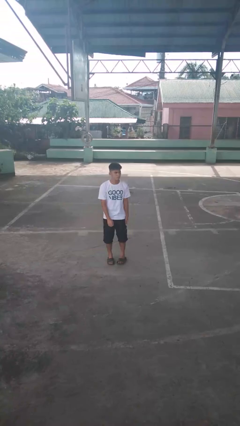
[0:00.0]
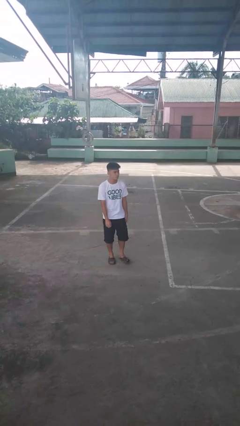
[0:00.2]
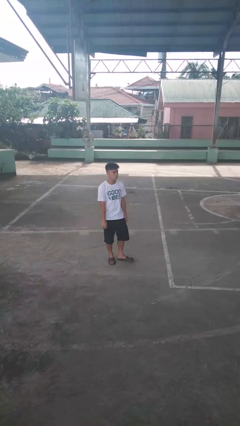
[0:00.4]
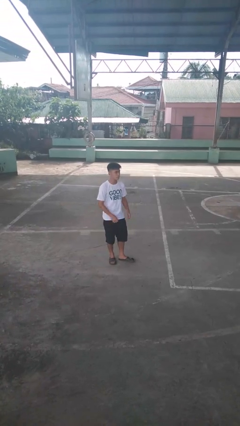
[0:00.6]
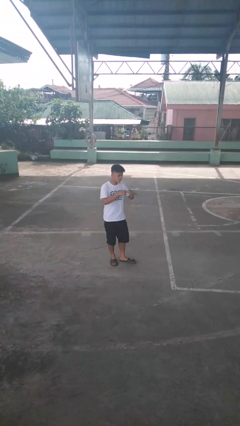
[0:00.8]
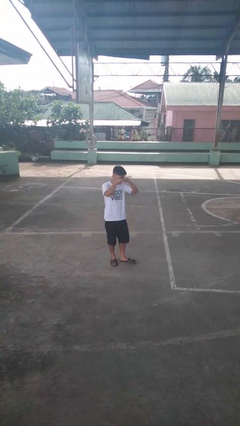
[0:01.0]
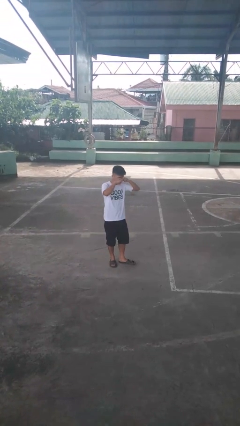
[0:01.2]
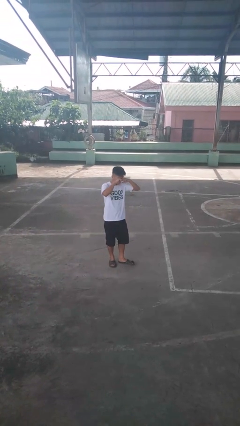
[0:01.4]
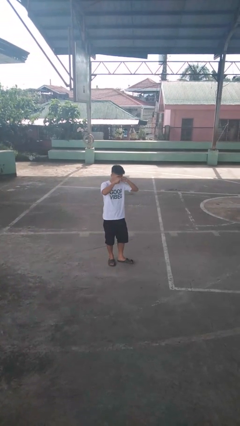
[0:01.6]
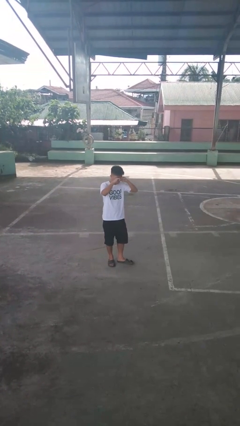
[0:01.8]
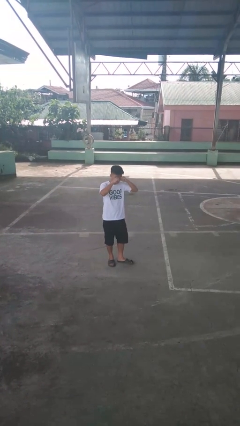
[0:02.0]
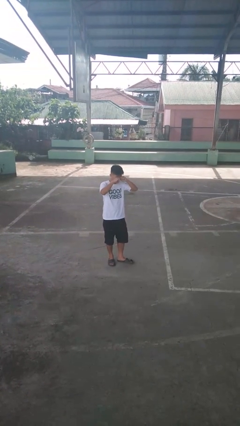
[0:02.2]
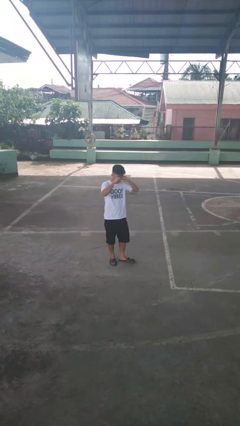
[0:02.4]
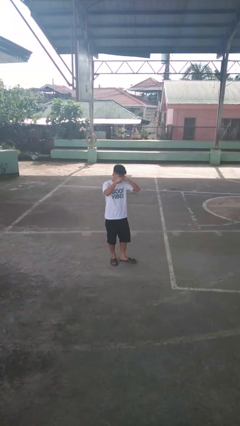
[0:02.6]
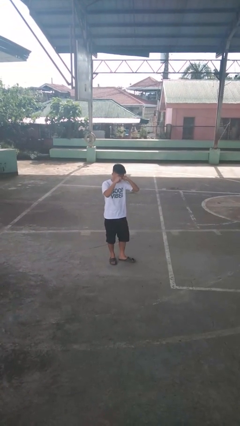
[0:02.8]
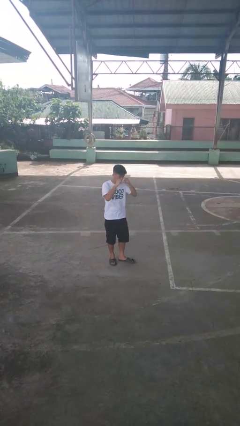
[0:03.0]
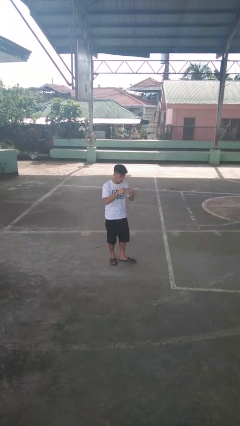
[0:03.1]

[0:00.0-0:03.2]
person rubs eyes

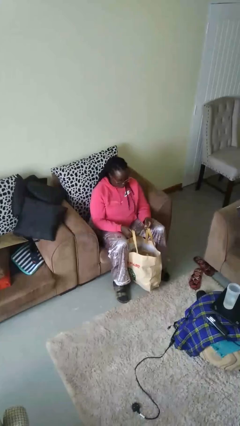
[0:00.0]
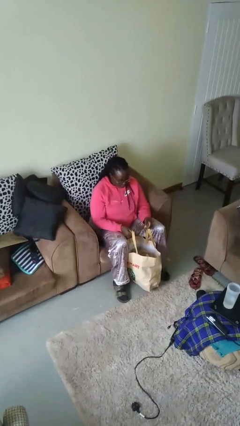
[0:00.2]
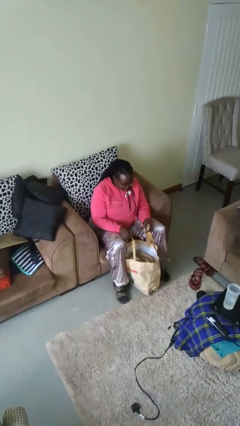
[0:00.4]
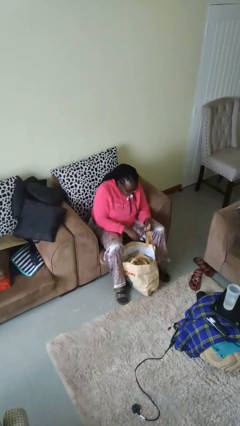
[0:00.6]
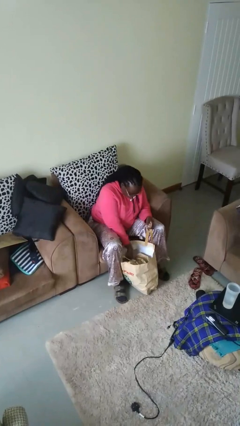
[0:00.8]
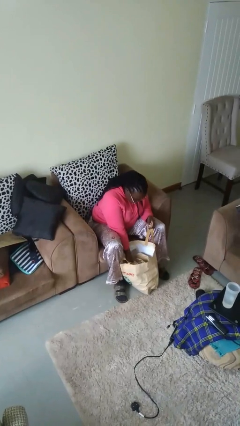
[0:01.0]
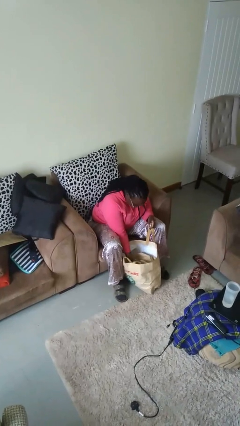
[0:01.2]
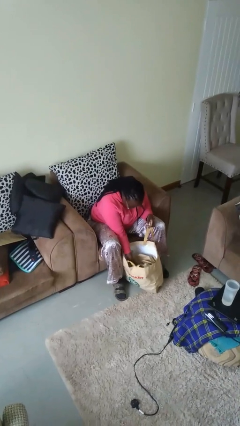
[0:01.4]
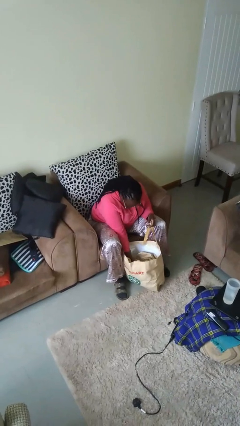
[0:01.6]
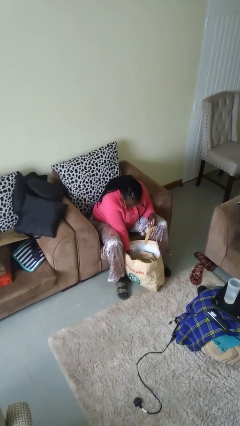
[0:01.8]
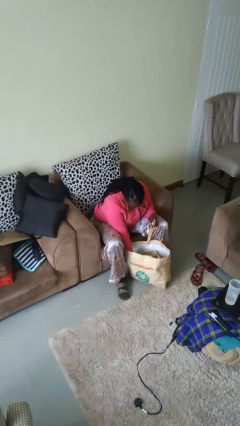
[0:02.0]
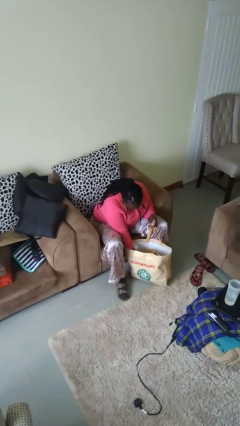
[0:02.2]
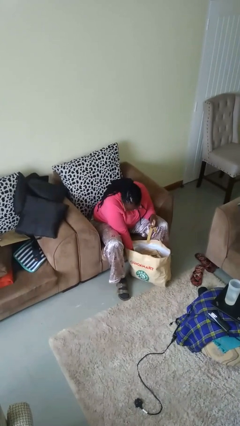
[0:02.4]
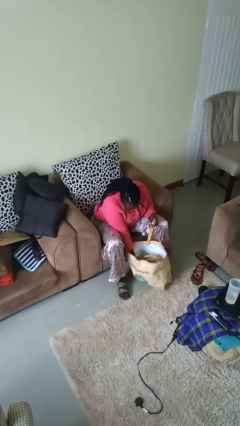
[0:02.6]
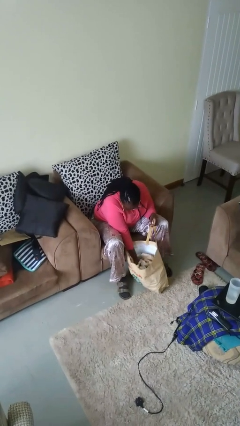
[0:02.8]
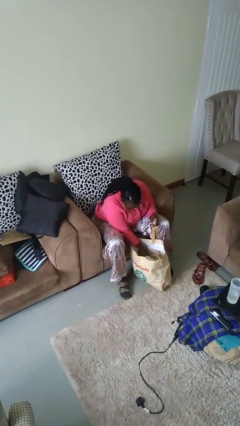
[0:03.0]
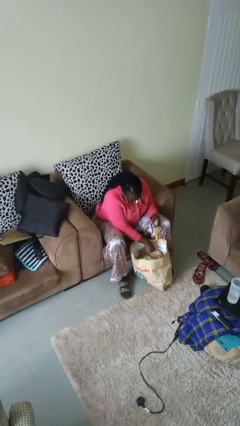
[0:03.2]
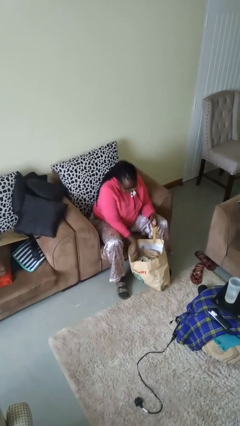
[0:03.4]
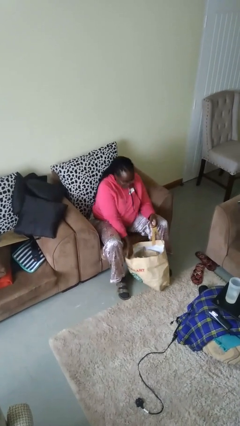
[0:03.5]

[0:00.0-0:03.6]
person searches in bag

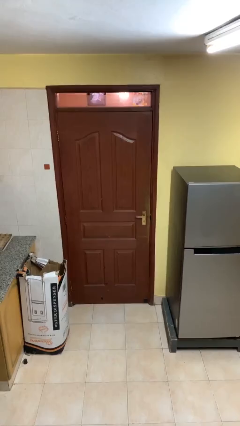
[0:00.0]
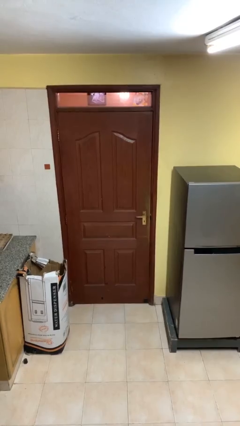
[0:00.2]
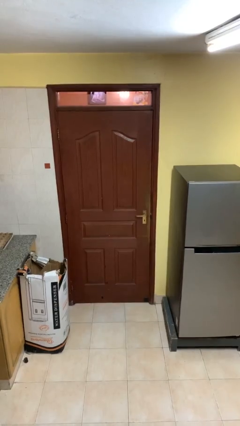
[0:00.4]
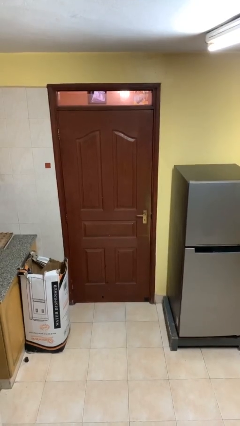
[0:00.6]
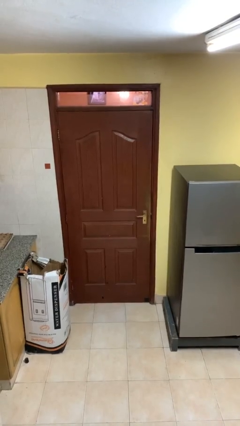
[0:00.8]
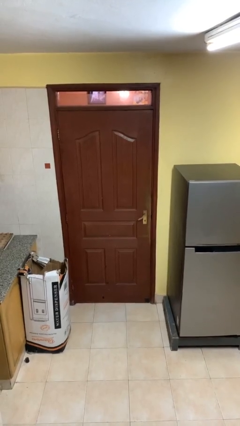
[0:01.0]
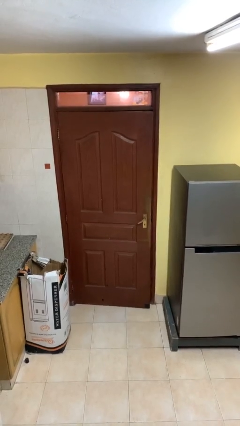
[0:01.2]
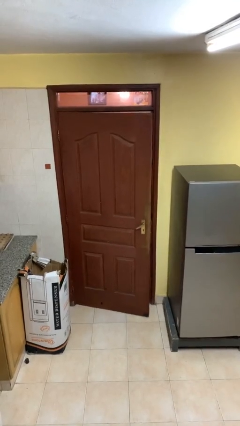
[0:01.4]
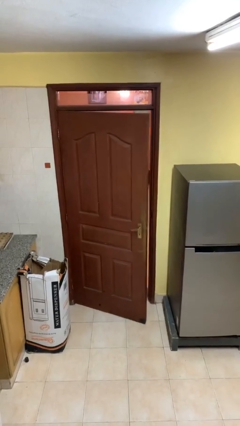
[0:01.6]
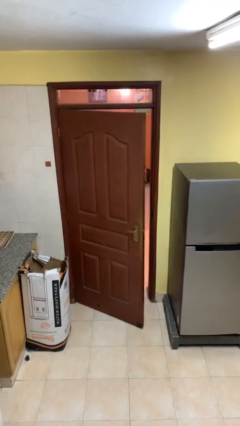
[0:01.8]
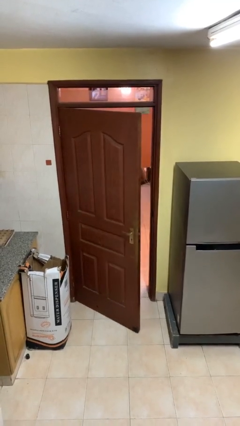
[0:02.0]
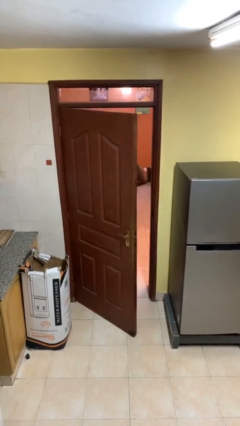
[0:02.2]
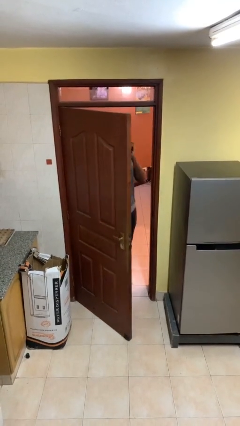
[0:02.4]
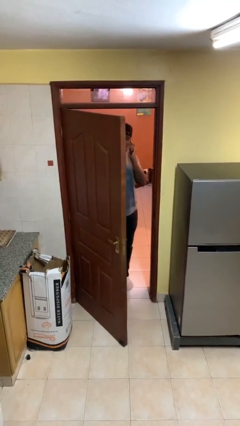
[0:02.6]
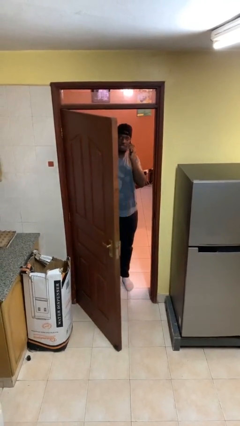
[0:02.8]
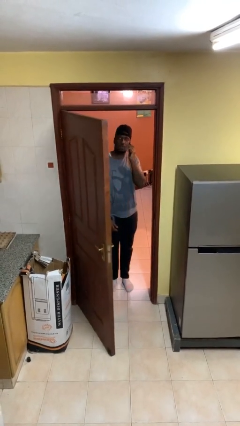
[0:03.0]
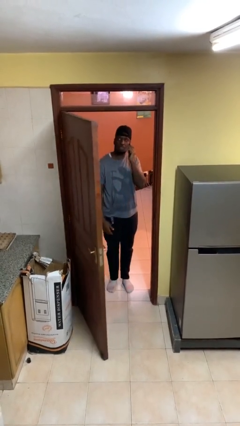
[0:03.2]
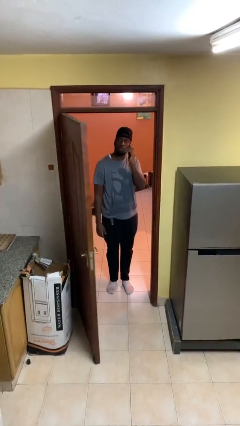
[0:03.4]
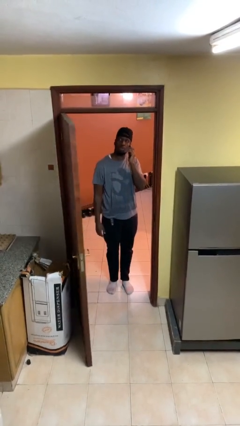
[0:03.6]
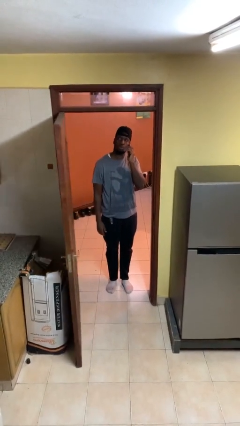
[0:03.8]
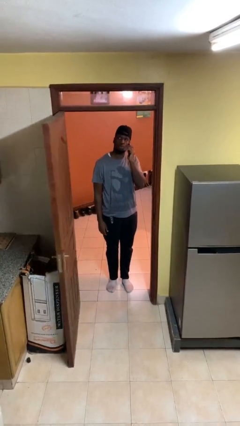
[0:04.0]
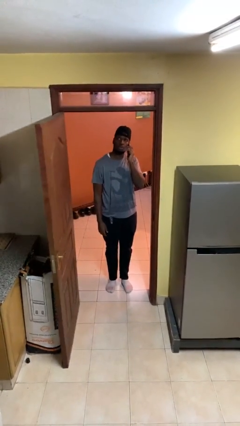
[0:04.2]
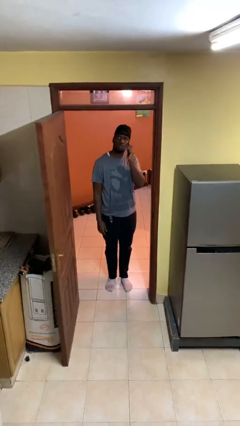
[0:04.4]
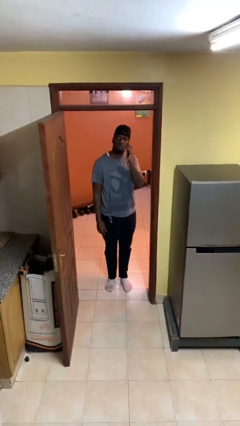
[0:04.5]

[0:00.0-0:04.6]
person opens facility door

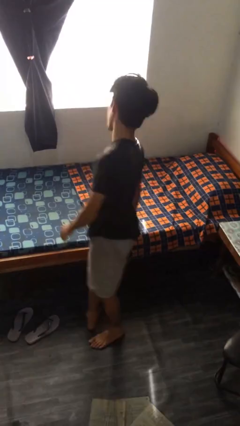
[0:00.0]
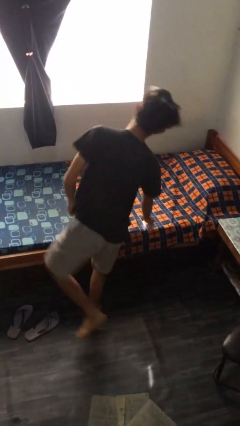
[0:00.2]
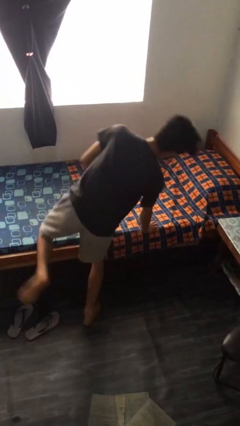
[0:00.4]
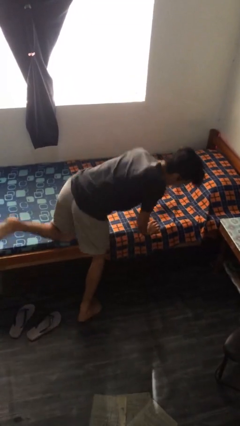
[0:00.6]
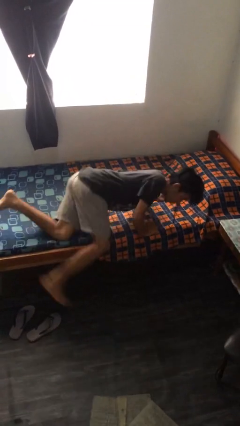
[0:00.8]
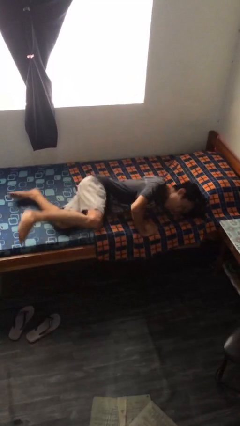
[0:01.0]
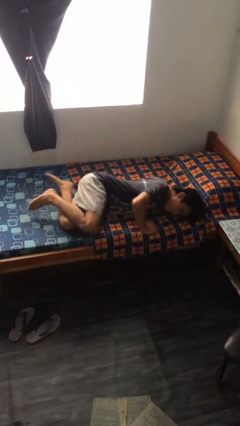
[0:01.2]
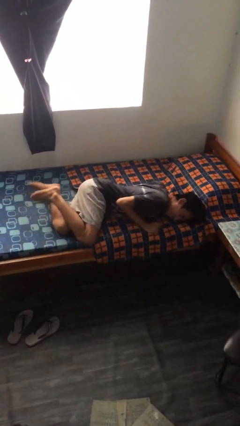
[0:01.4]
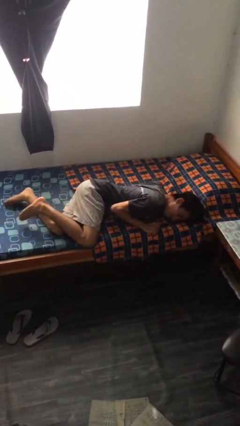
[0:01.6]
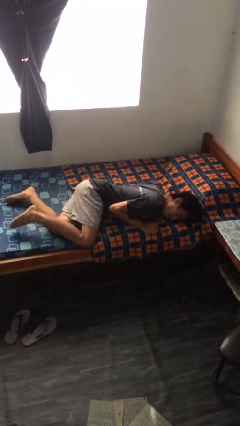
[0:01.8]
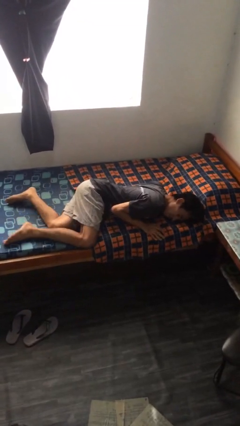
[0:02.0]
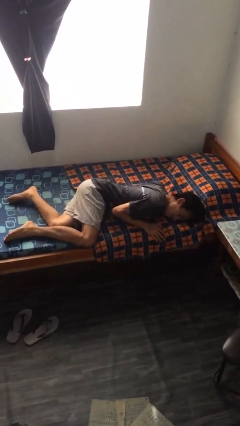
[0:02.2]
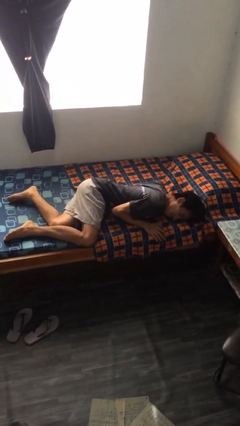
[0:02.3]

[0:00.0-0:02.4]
person lies down on bed

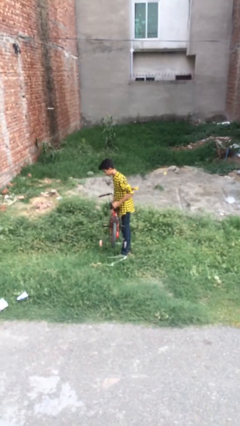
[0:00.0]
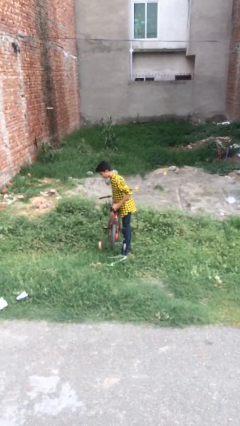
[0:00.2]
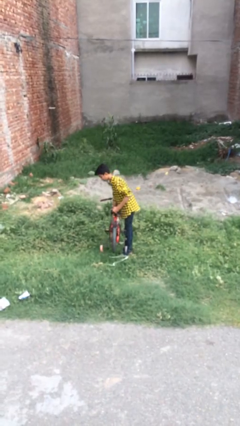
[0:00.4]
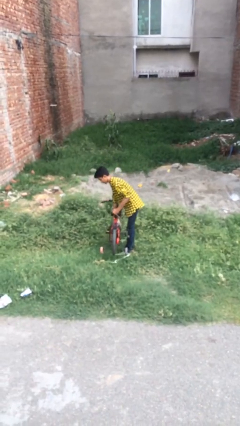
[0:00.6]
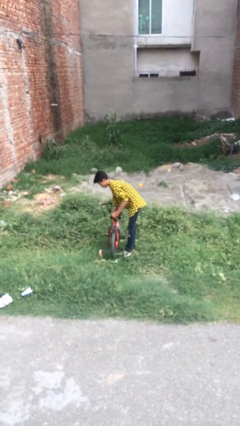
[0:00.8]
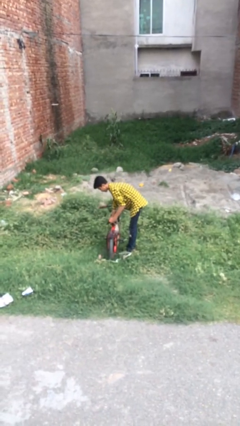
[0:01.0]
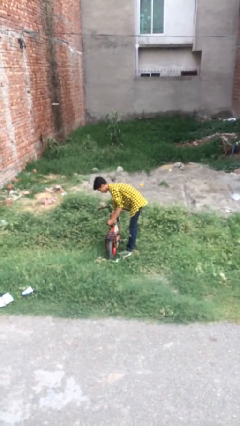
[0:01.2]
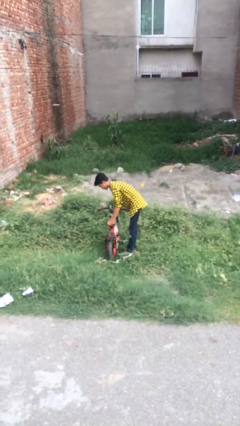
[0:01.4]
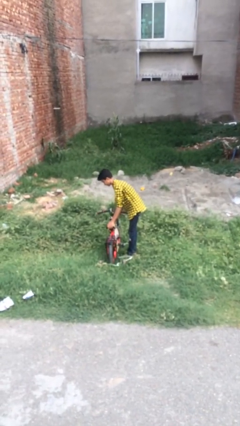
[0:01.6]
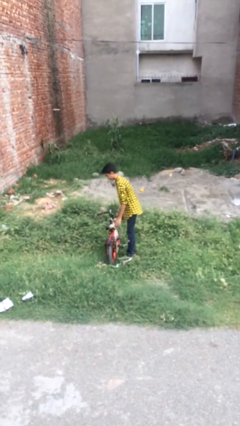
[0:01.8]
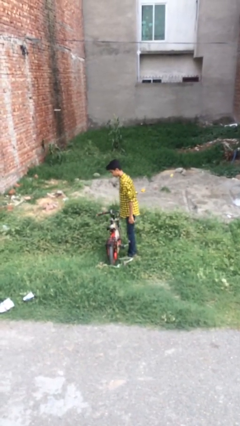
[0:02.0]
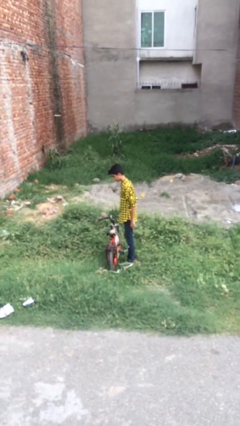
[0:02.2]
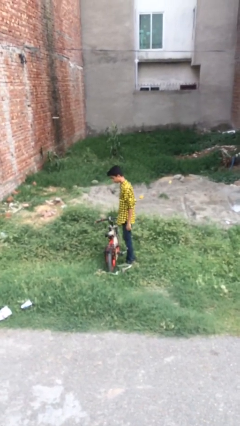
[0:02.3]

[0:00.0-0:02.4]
person puts down object on floor

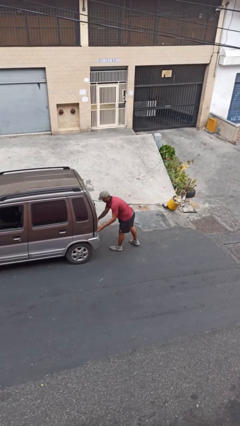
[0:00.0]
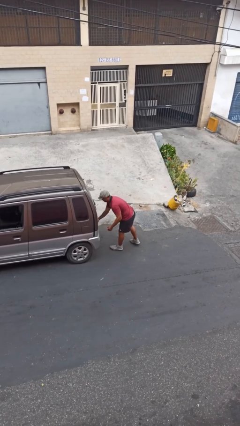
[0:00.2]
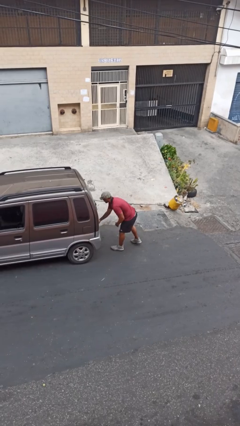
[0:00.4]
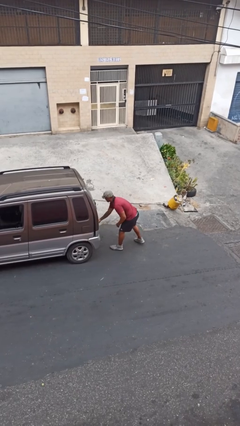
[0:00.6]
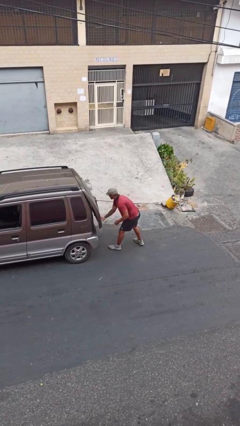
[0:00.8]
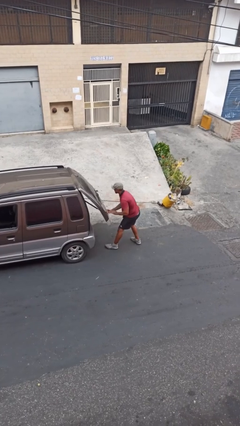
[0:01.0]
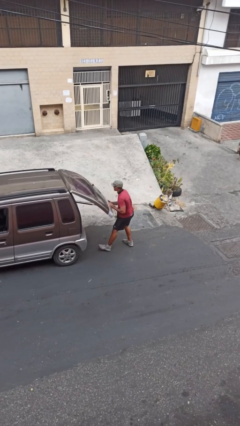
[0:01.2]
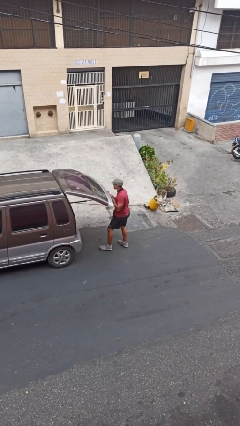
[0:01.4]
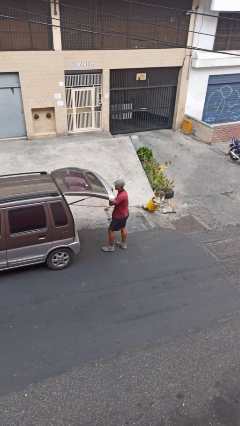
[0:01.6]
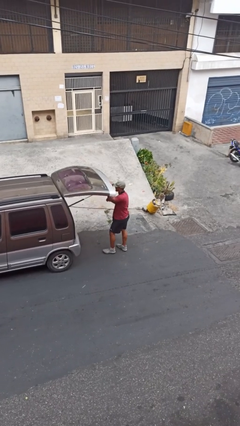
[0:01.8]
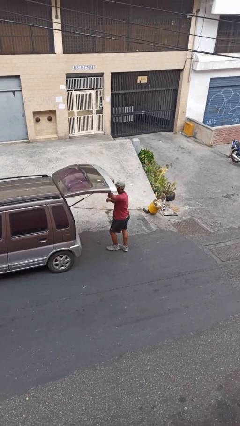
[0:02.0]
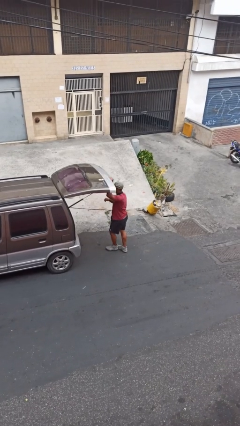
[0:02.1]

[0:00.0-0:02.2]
person opens car trunk
